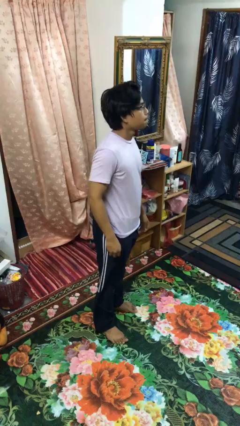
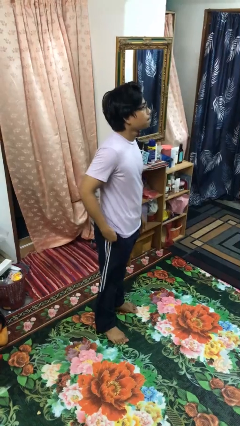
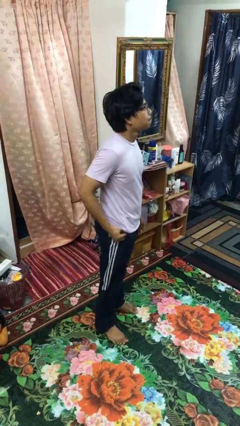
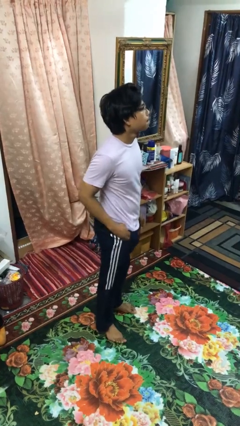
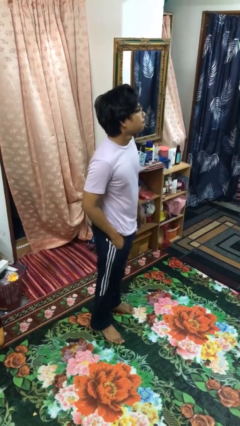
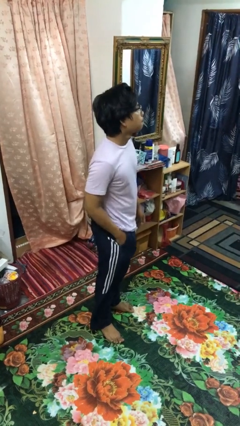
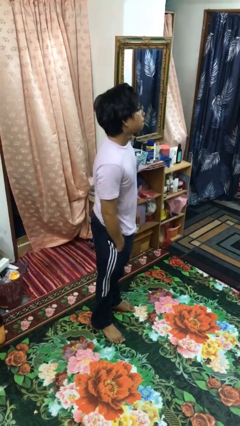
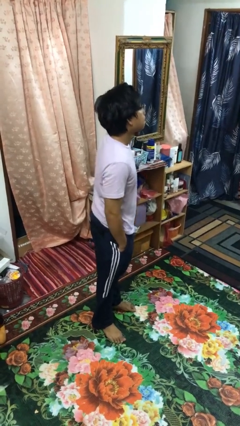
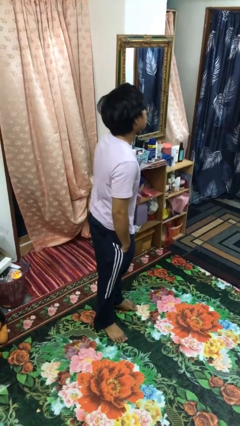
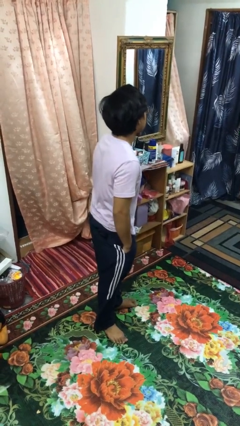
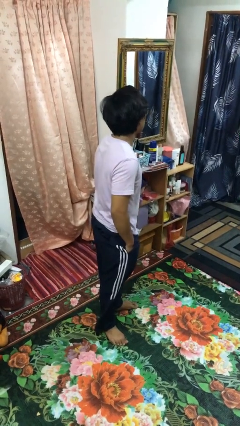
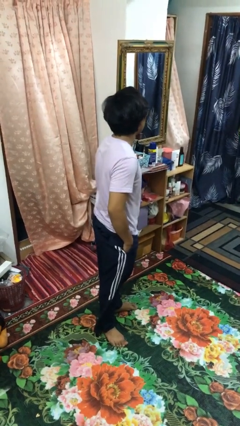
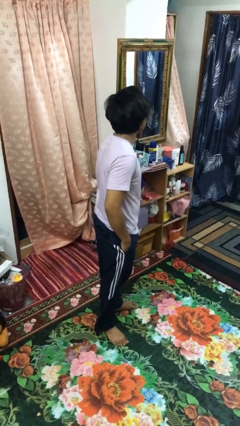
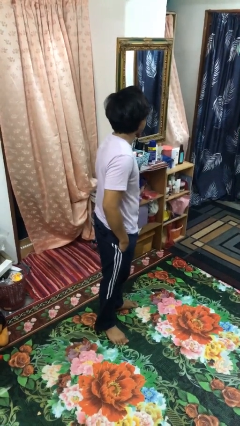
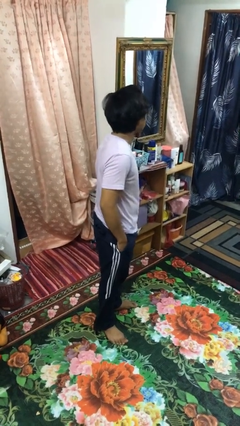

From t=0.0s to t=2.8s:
person puts hands in back pockets

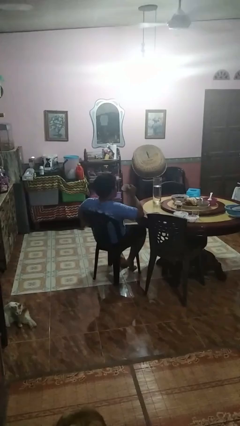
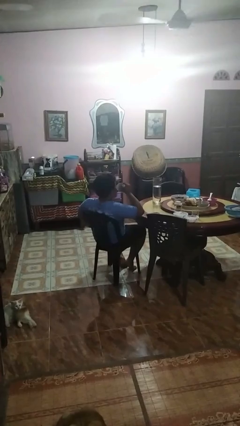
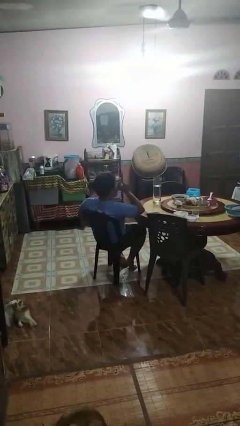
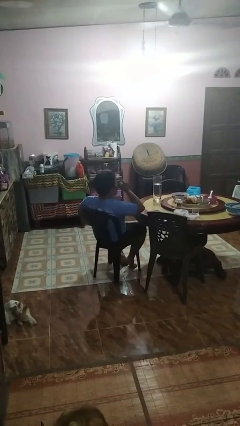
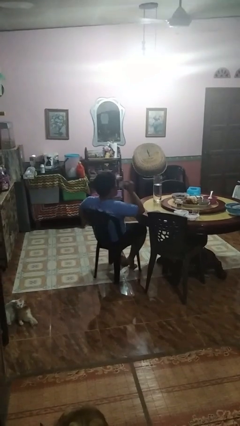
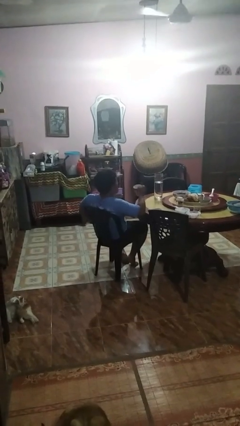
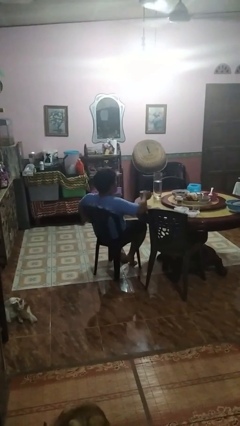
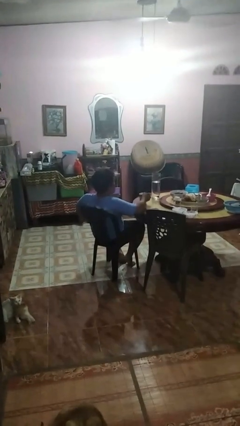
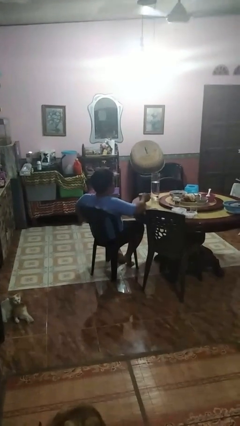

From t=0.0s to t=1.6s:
person drinks from mug

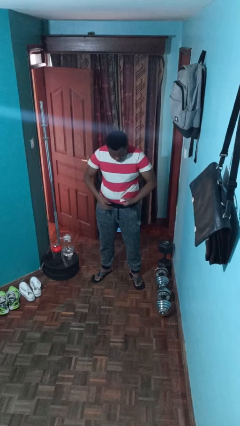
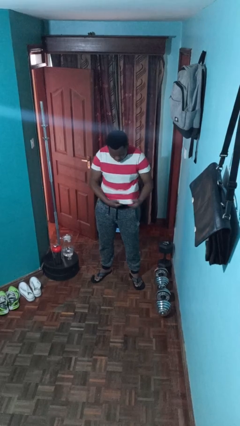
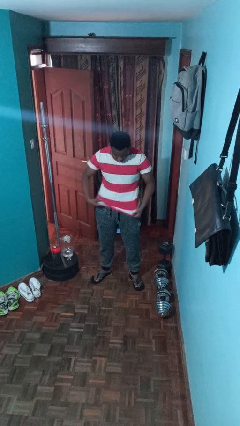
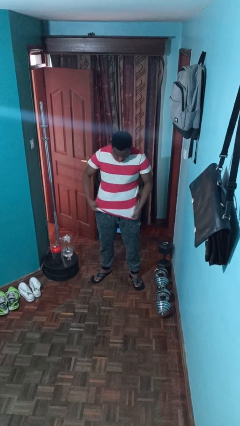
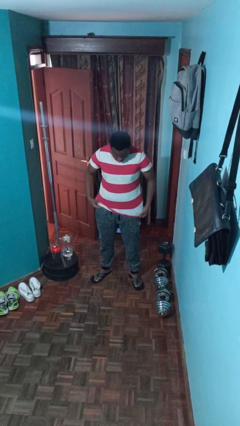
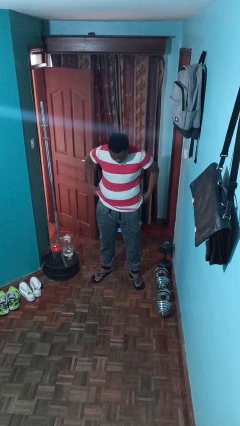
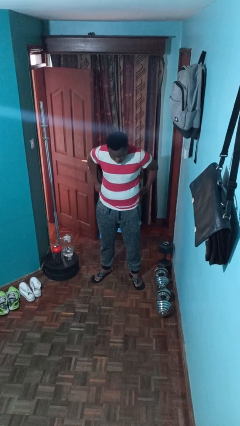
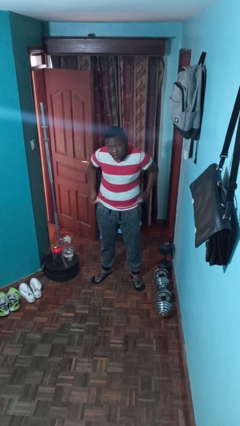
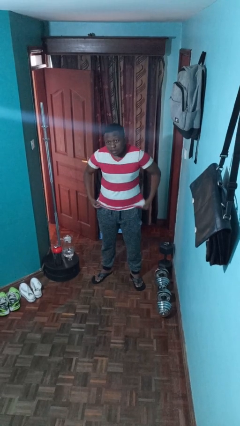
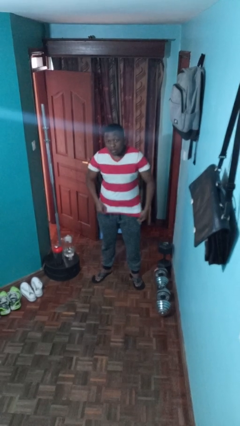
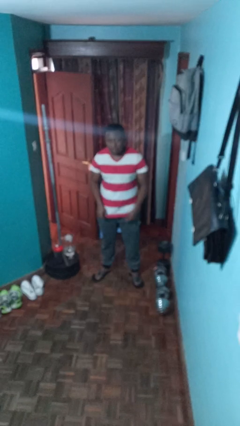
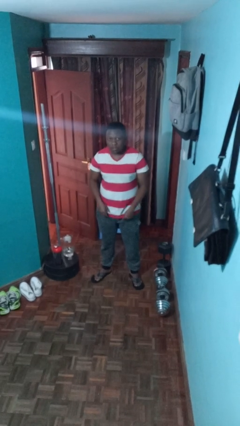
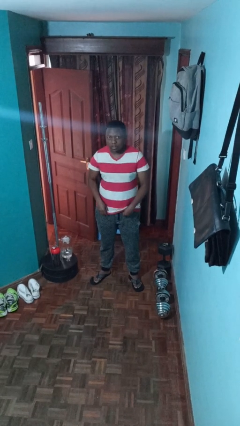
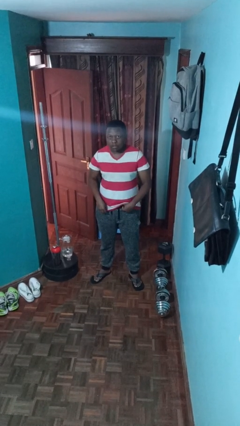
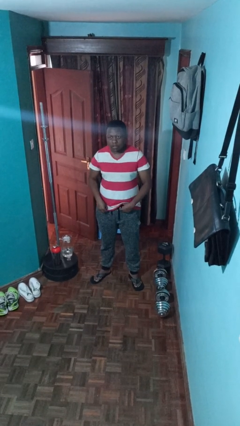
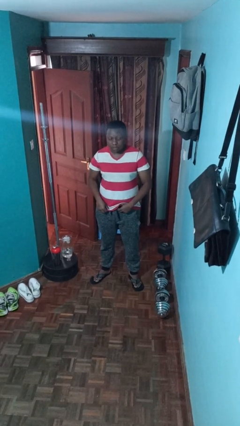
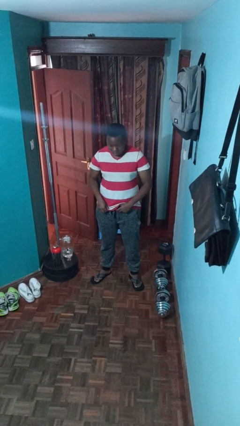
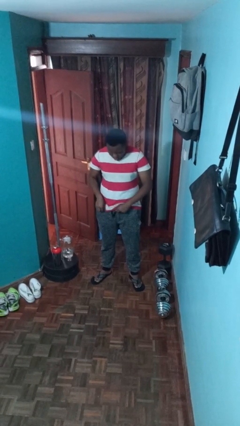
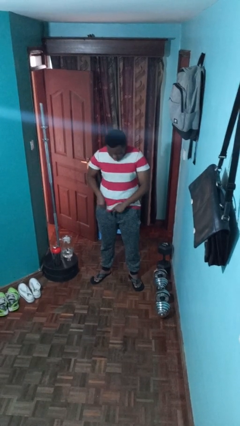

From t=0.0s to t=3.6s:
person untucks shirt

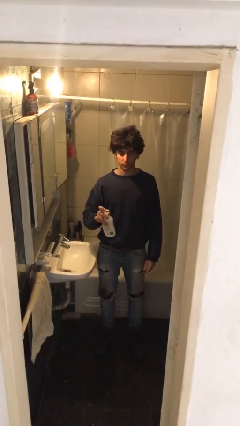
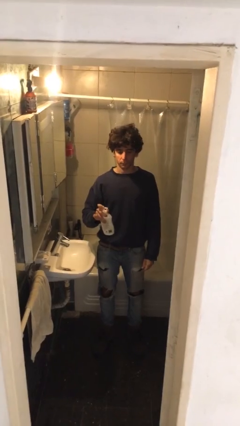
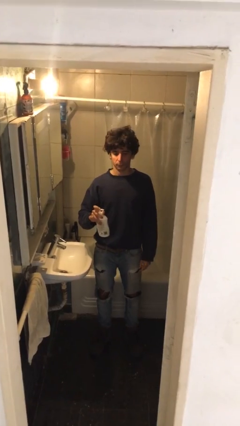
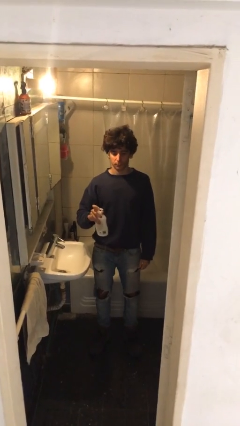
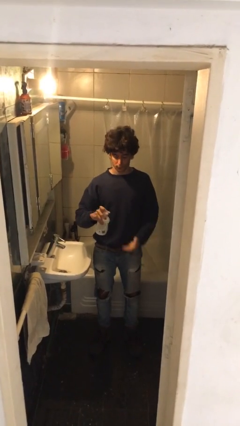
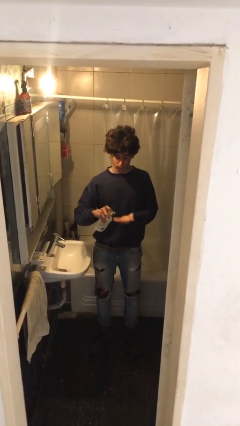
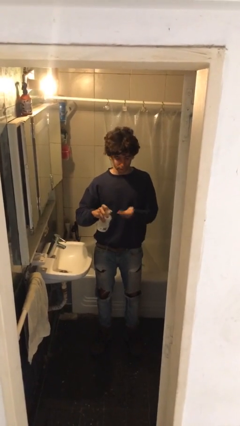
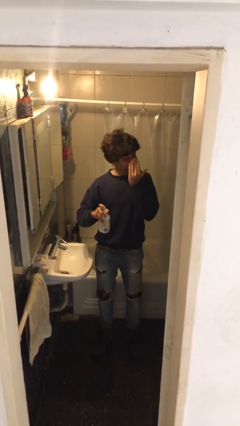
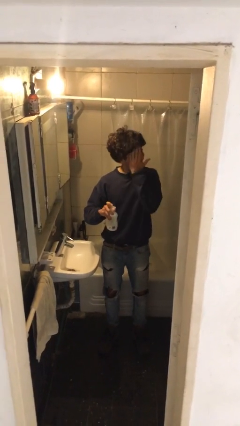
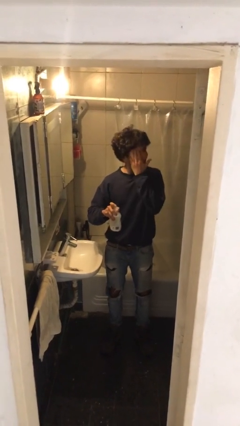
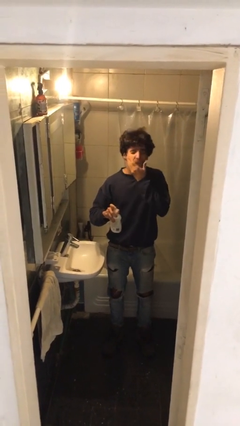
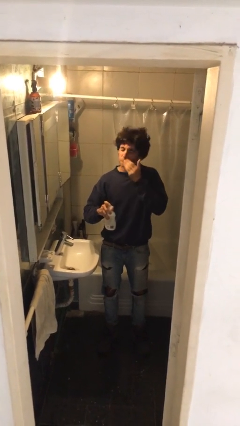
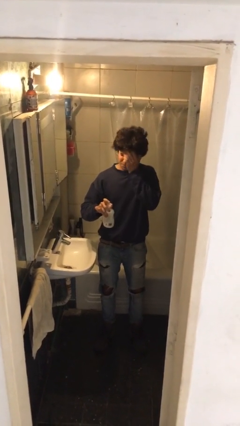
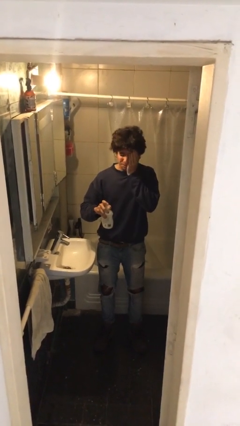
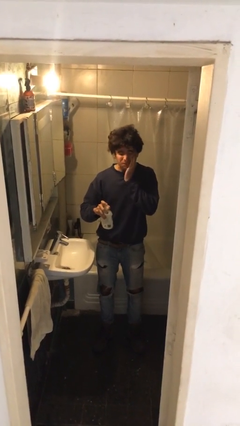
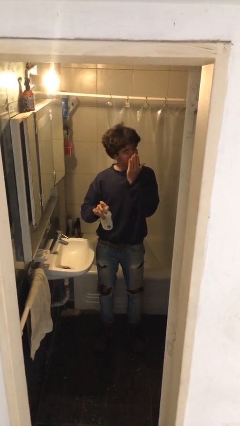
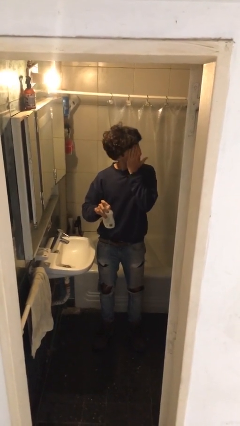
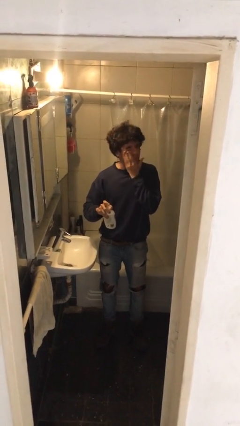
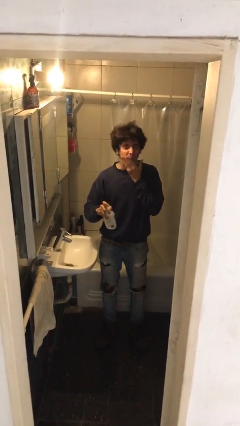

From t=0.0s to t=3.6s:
person applies facial moisturizer

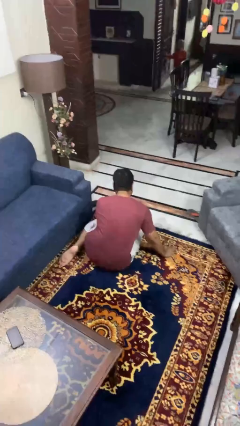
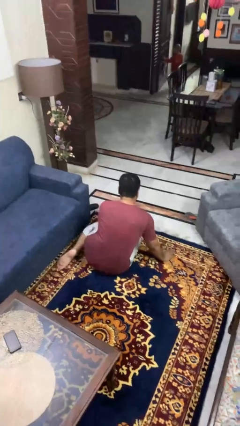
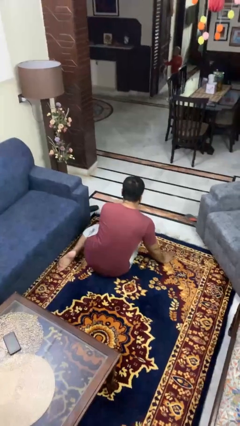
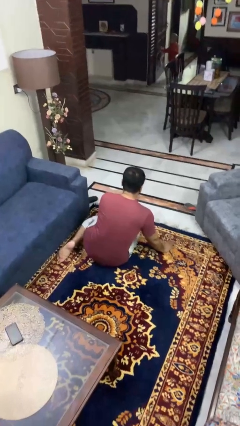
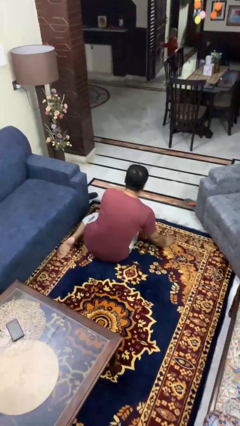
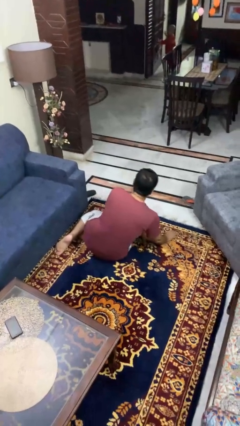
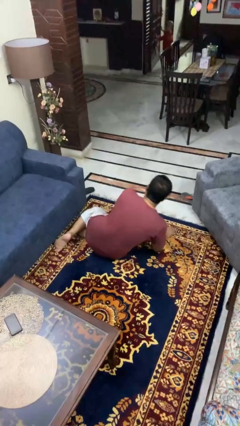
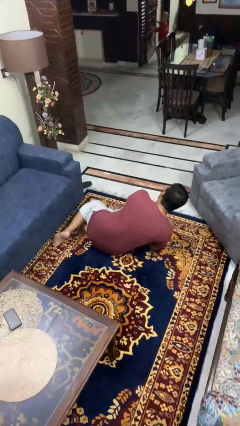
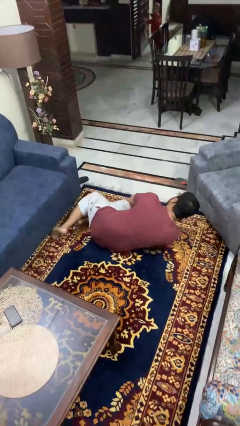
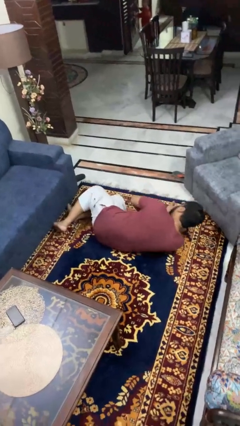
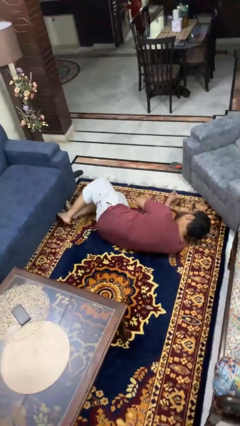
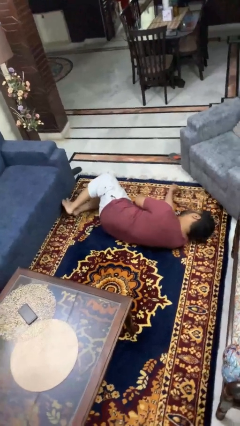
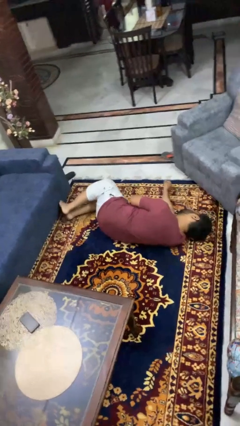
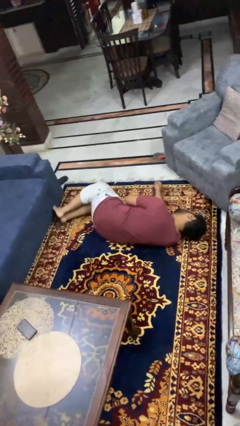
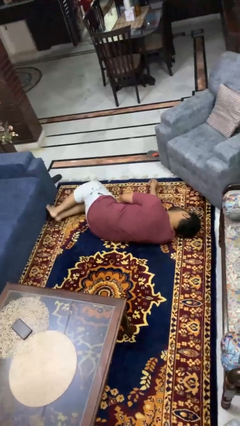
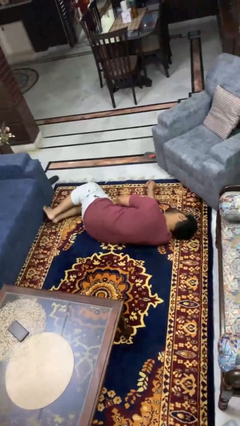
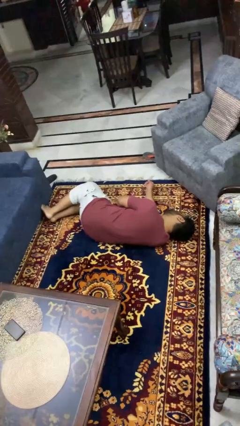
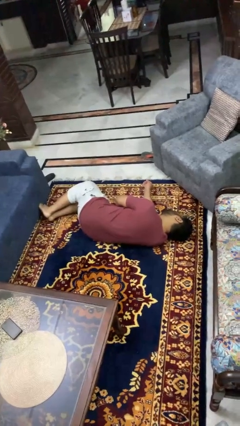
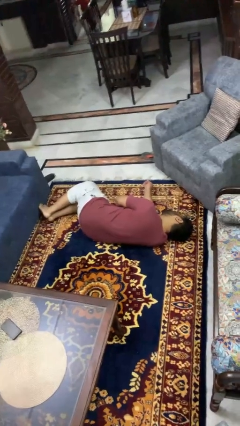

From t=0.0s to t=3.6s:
person lies down on floor

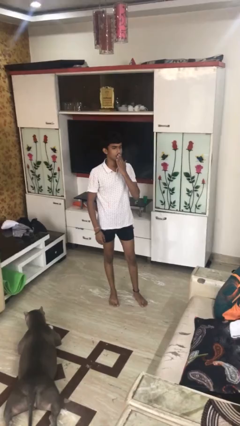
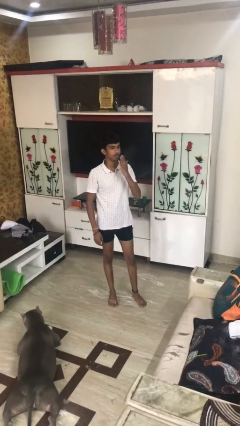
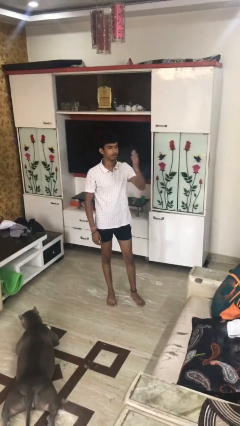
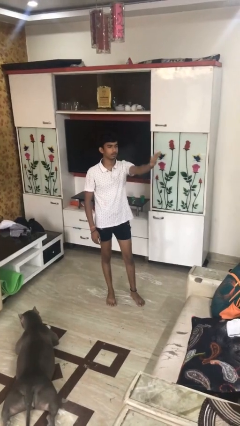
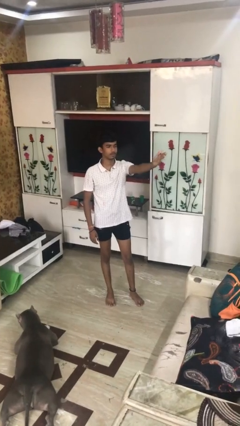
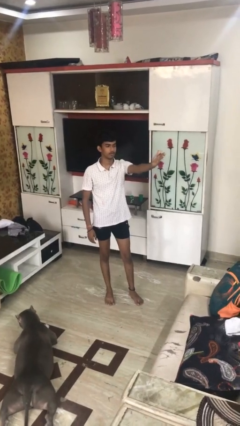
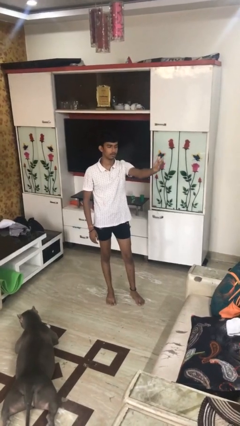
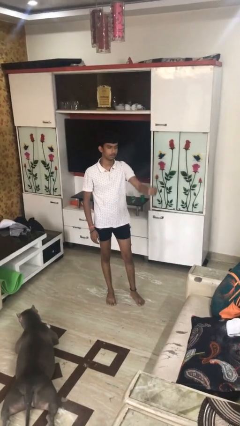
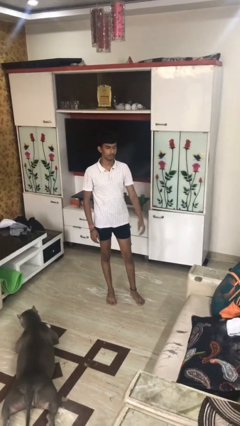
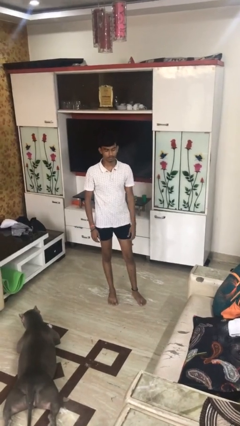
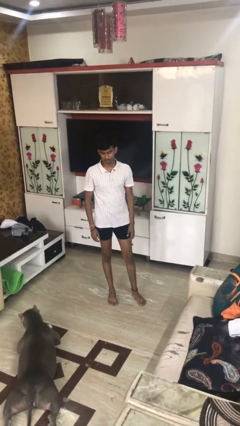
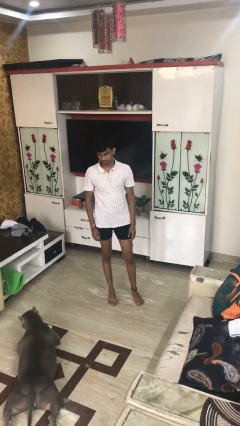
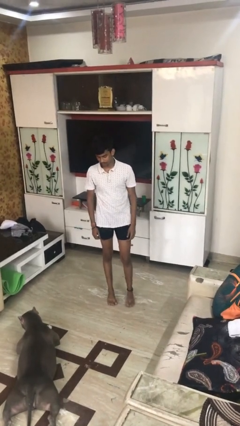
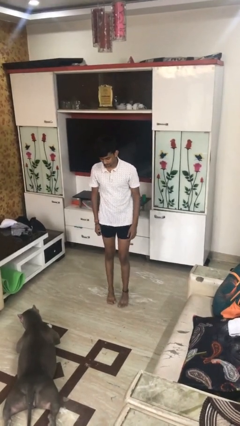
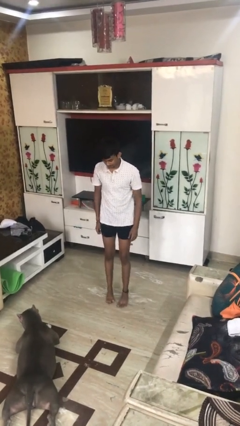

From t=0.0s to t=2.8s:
person gestures blow kiss
